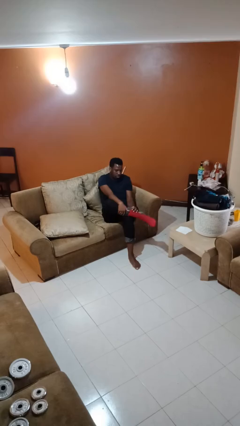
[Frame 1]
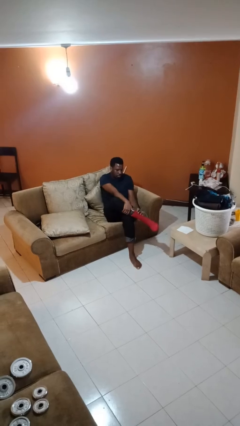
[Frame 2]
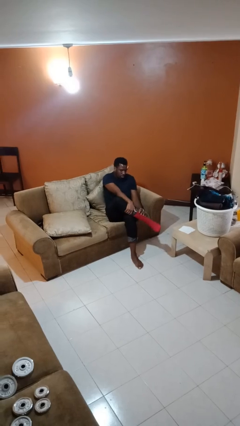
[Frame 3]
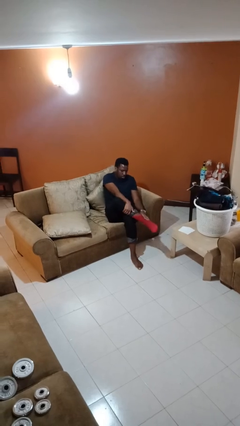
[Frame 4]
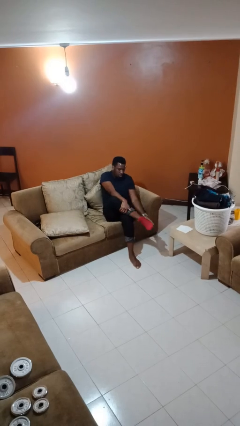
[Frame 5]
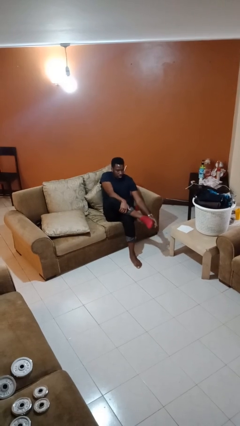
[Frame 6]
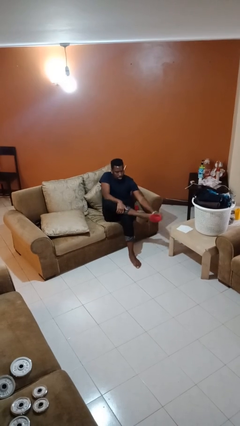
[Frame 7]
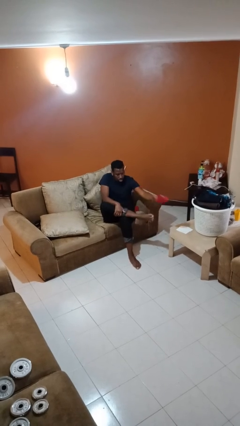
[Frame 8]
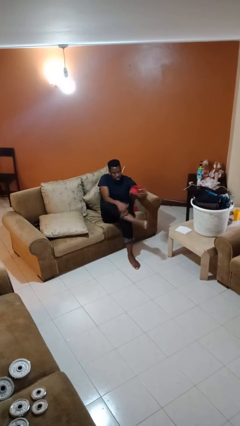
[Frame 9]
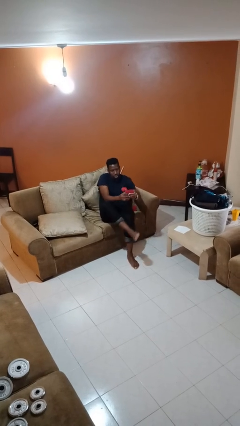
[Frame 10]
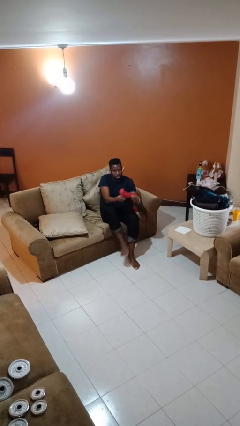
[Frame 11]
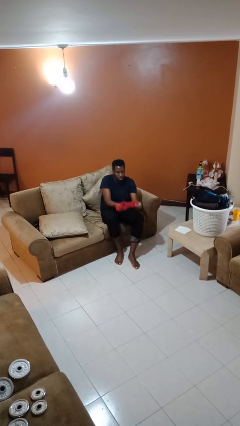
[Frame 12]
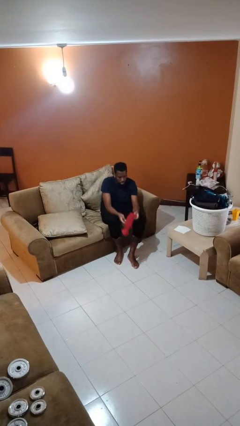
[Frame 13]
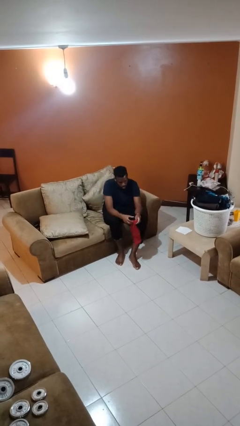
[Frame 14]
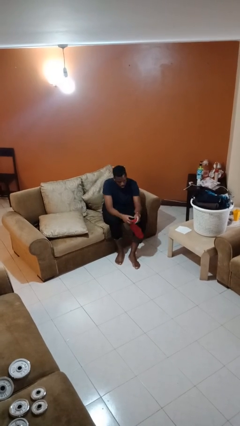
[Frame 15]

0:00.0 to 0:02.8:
person takes off socks

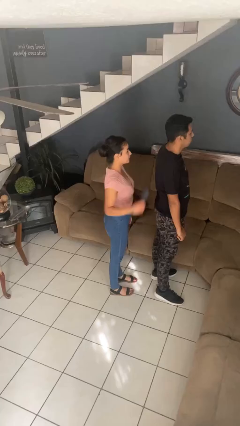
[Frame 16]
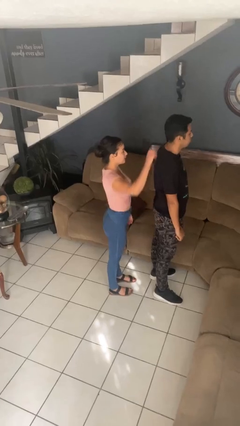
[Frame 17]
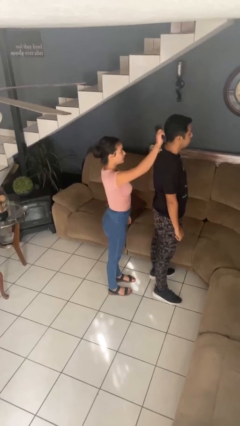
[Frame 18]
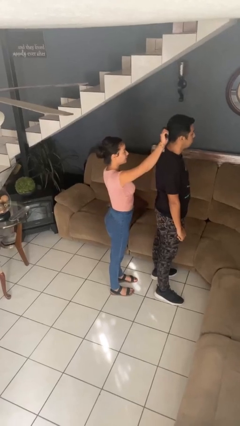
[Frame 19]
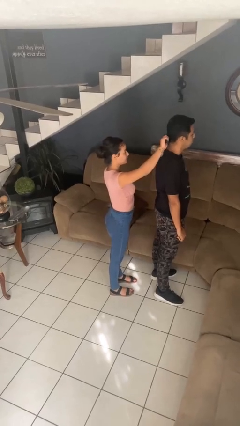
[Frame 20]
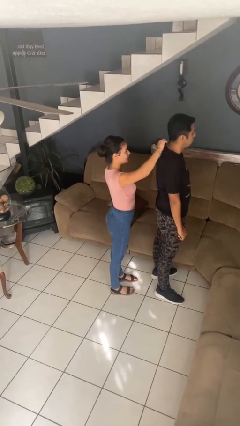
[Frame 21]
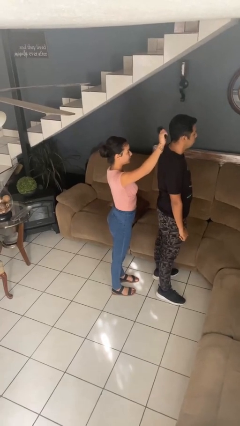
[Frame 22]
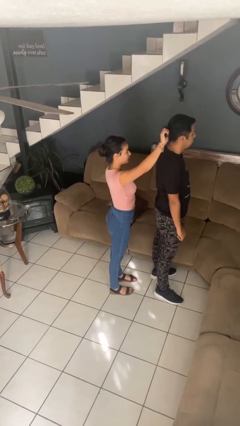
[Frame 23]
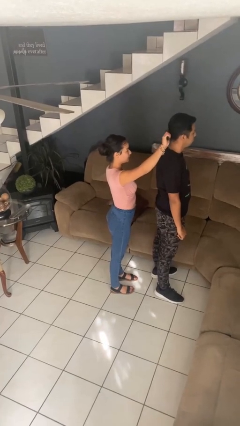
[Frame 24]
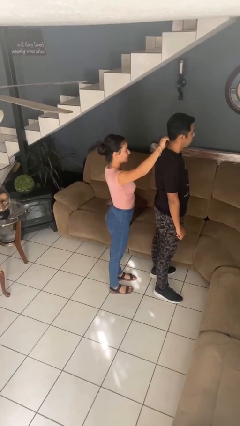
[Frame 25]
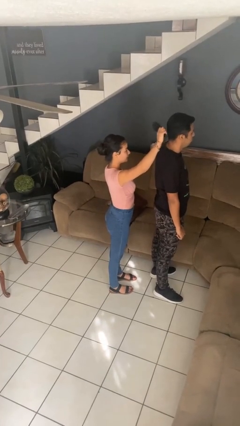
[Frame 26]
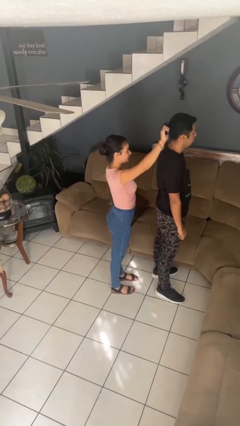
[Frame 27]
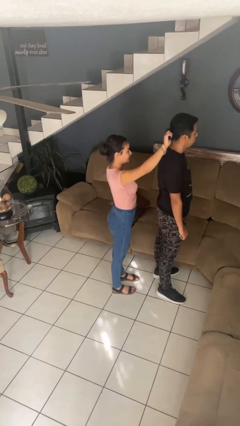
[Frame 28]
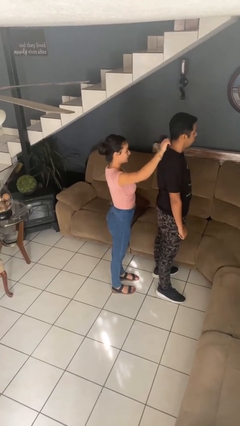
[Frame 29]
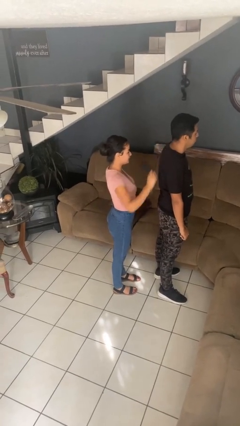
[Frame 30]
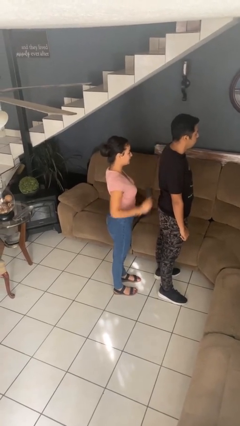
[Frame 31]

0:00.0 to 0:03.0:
person brushes hair of person

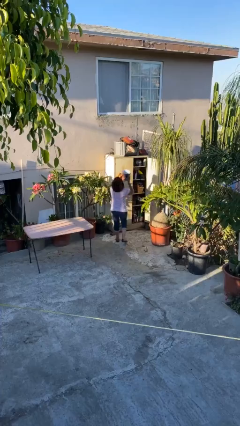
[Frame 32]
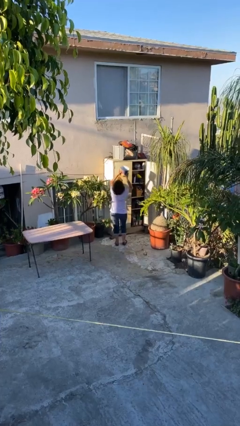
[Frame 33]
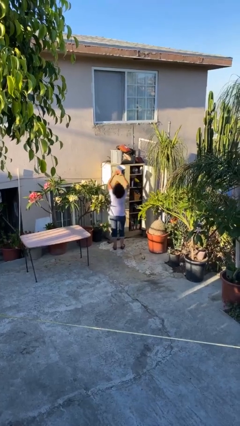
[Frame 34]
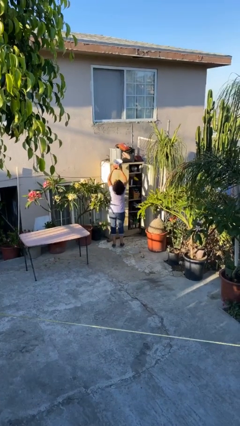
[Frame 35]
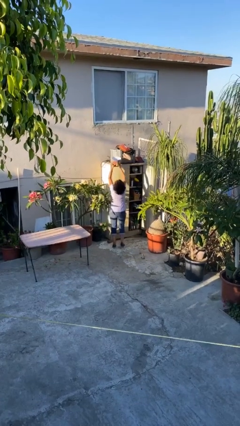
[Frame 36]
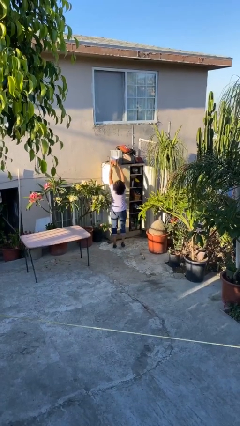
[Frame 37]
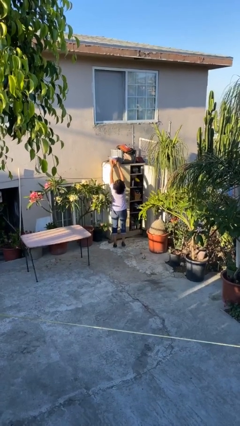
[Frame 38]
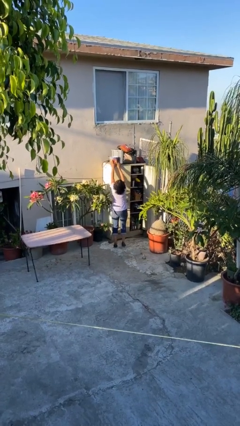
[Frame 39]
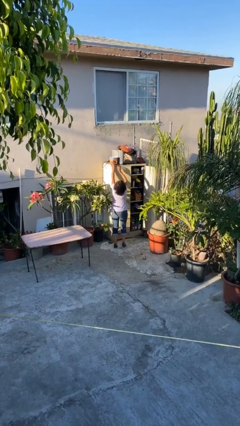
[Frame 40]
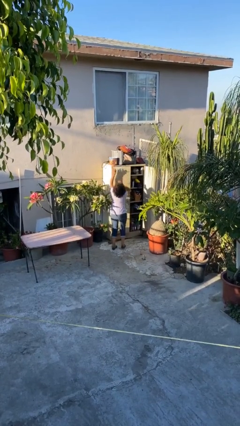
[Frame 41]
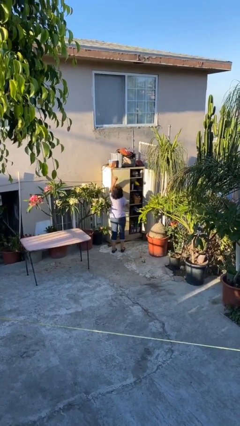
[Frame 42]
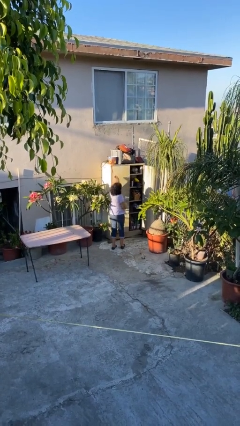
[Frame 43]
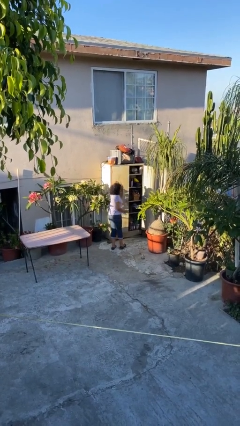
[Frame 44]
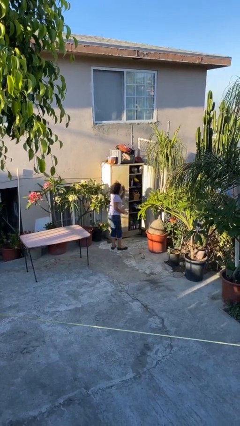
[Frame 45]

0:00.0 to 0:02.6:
person puts down object on shelf

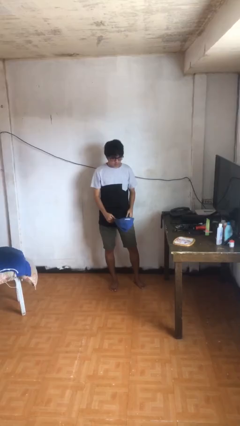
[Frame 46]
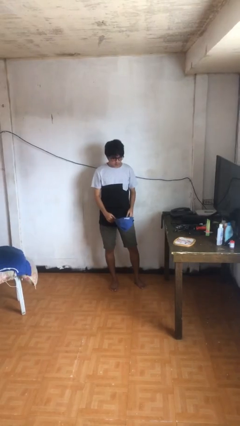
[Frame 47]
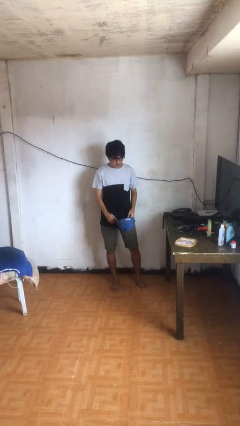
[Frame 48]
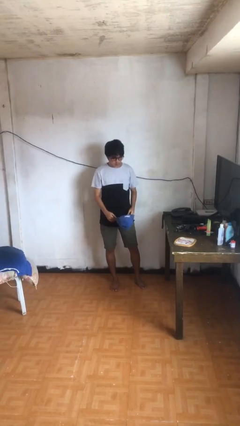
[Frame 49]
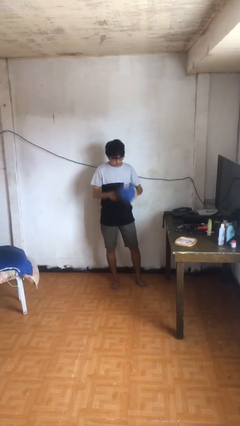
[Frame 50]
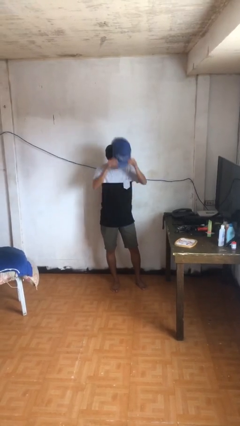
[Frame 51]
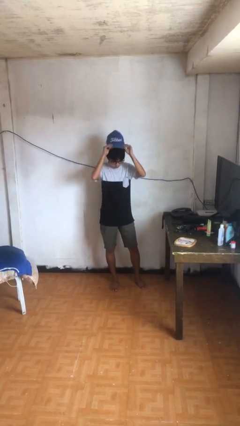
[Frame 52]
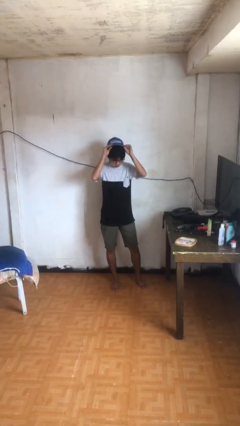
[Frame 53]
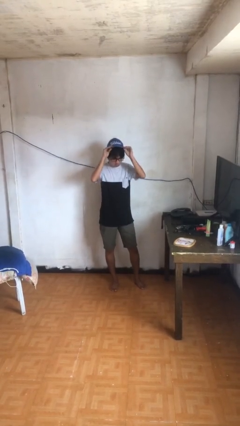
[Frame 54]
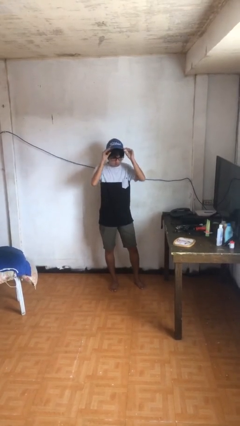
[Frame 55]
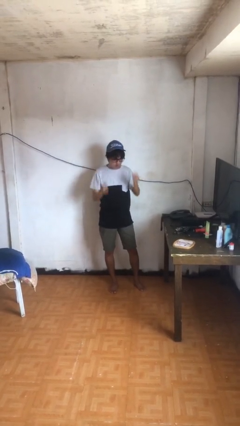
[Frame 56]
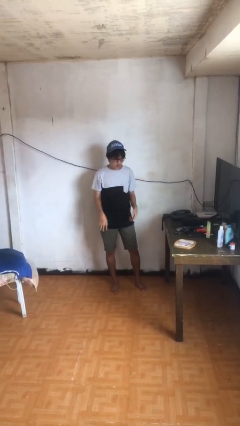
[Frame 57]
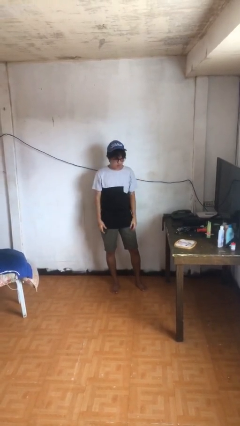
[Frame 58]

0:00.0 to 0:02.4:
person puts on hat

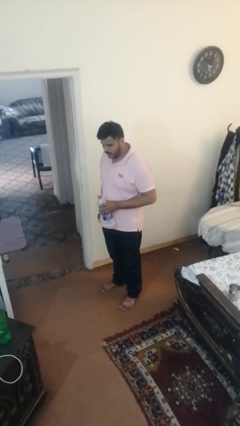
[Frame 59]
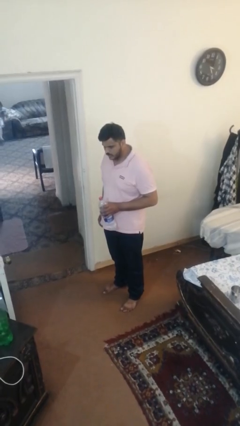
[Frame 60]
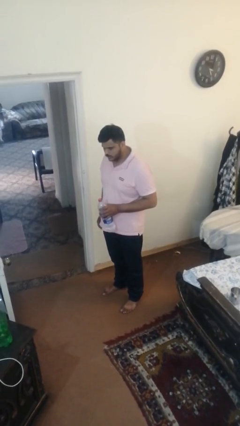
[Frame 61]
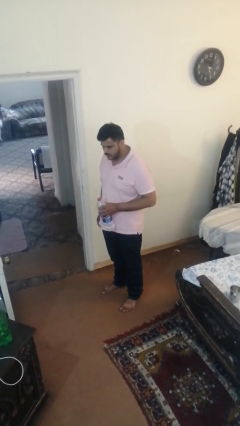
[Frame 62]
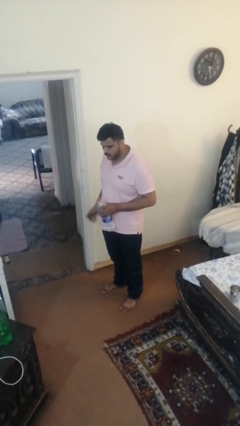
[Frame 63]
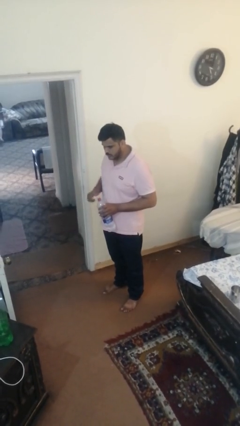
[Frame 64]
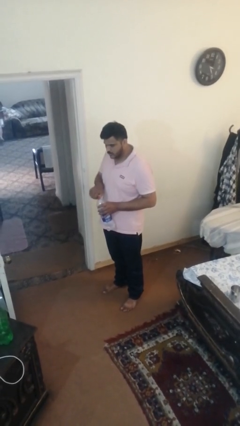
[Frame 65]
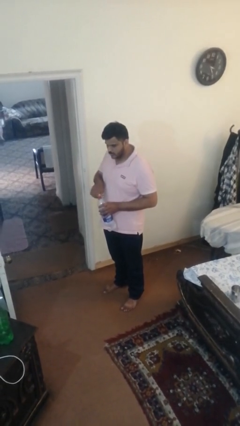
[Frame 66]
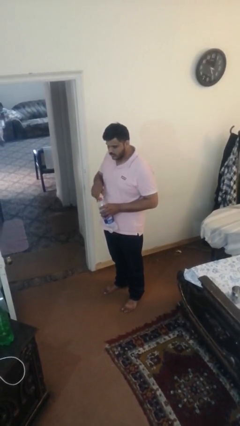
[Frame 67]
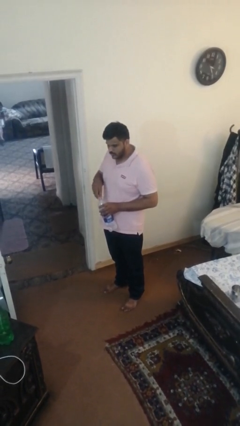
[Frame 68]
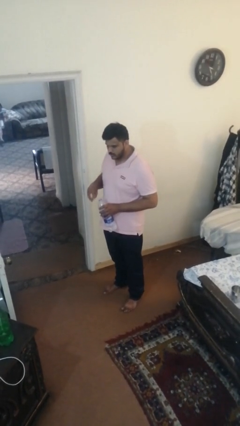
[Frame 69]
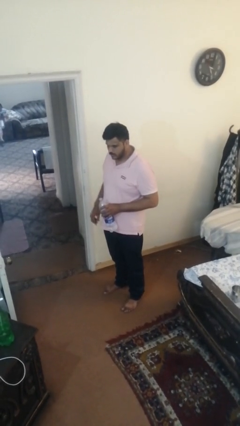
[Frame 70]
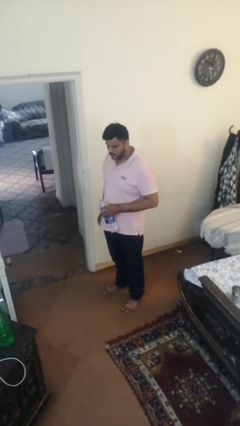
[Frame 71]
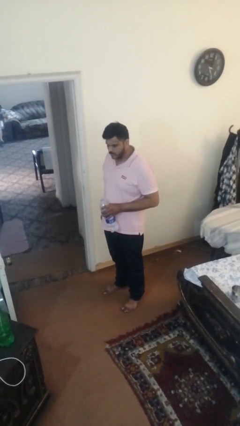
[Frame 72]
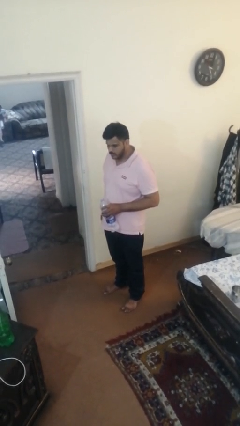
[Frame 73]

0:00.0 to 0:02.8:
person unscrews lid from bottle

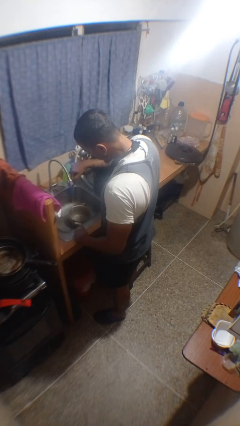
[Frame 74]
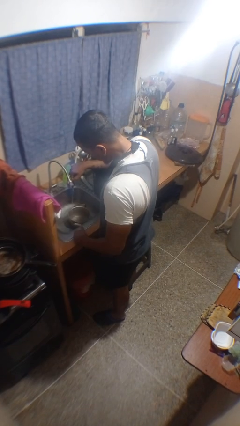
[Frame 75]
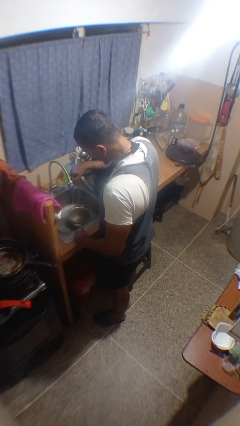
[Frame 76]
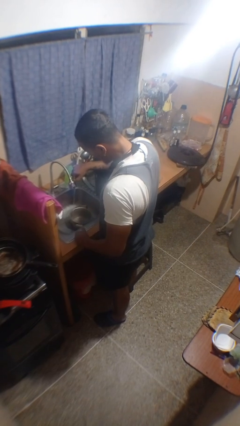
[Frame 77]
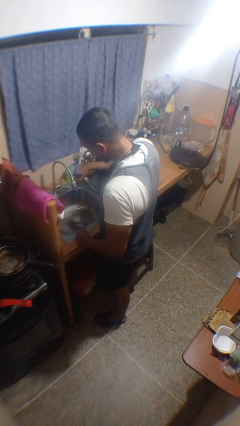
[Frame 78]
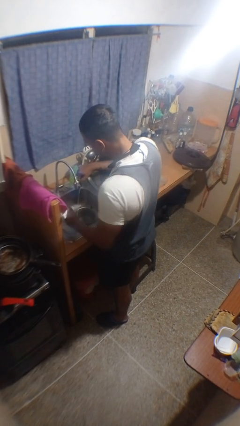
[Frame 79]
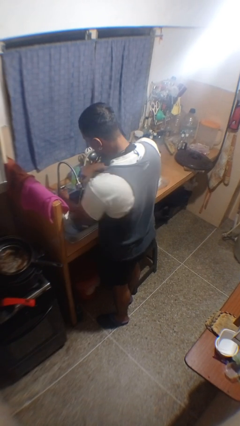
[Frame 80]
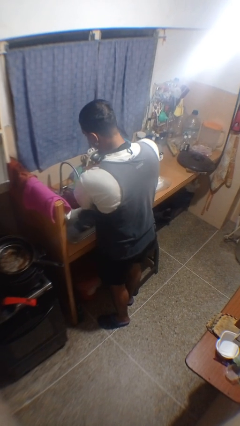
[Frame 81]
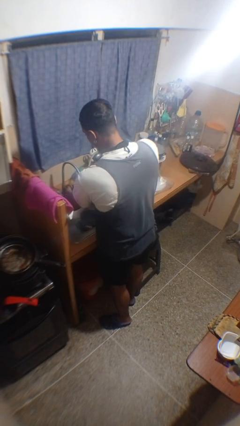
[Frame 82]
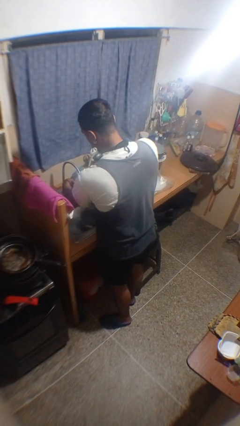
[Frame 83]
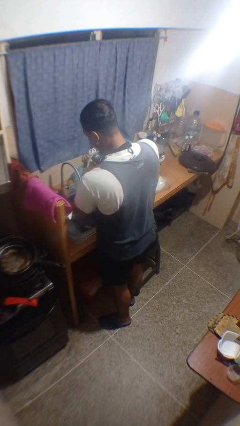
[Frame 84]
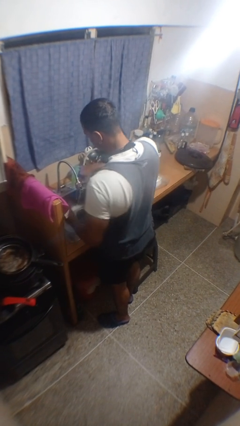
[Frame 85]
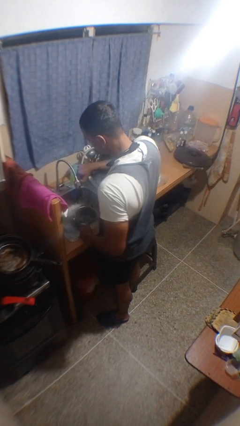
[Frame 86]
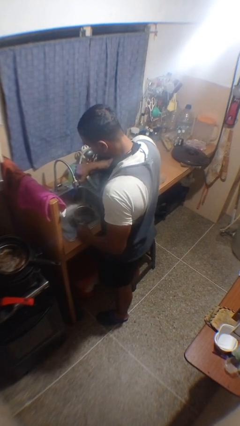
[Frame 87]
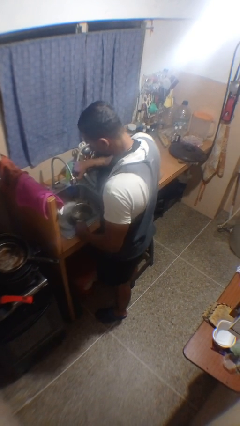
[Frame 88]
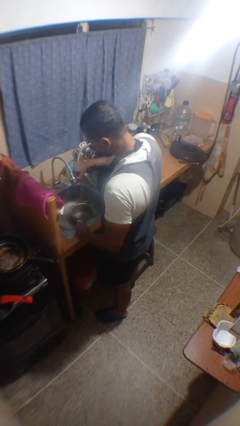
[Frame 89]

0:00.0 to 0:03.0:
person turns off faucet

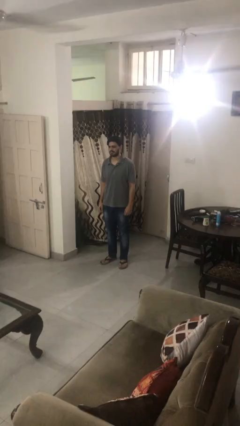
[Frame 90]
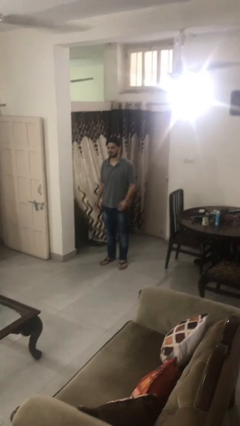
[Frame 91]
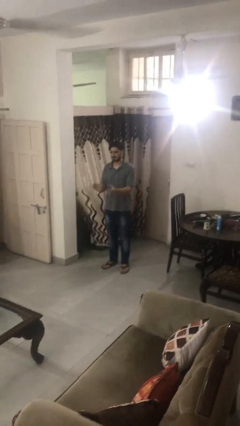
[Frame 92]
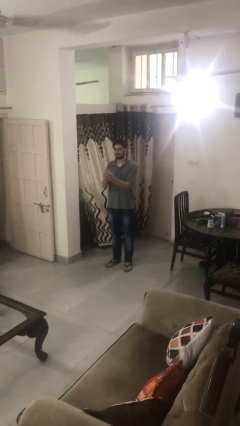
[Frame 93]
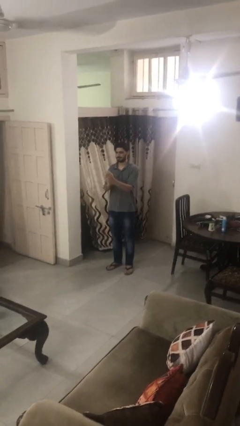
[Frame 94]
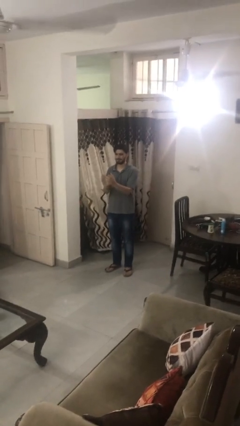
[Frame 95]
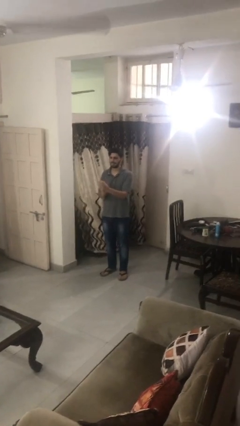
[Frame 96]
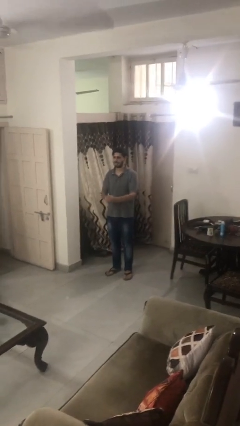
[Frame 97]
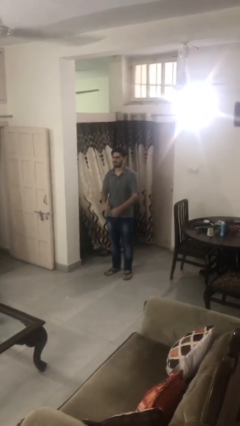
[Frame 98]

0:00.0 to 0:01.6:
person claps hands
